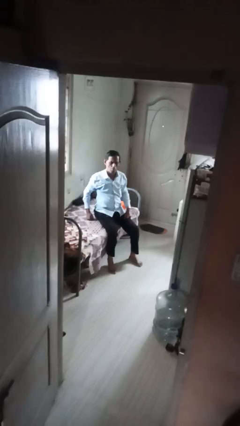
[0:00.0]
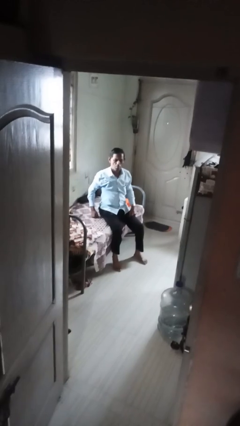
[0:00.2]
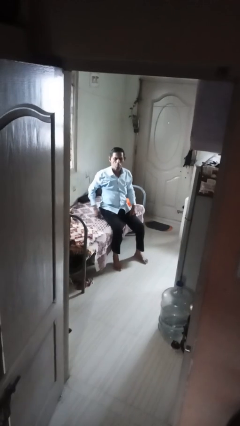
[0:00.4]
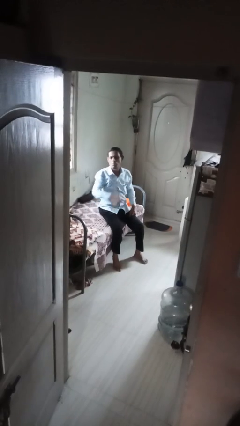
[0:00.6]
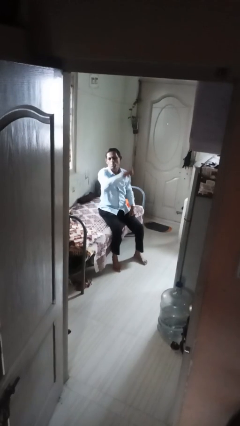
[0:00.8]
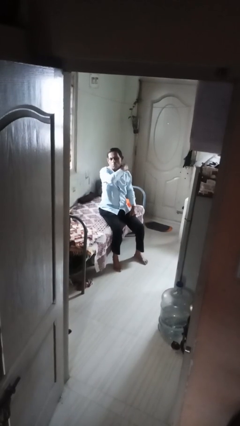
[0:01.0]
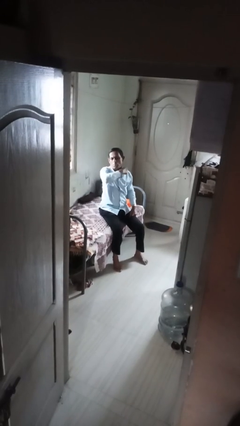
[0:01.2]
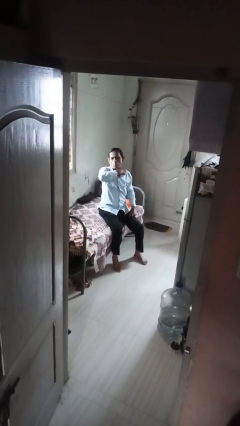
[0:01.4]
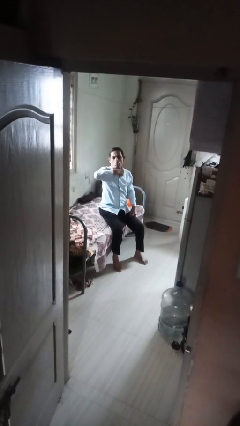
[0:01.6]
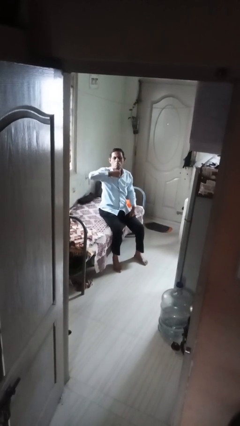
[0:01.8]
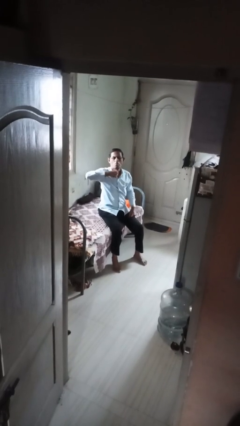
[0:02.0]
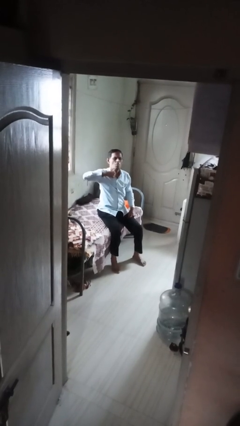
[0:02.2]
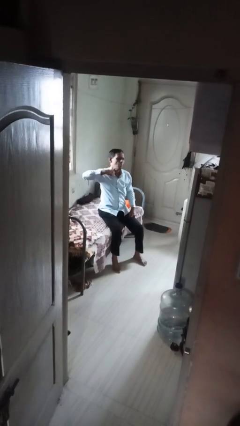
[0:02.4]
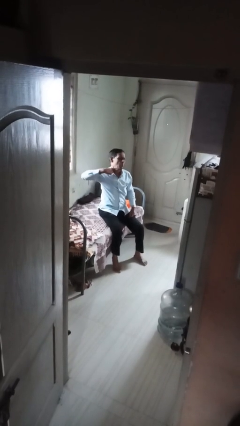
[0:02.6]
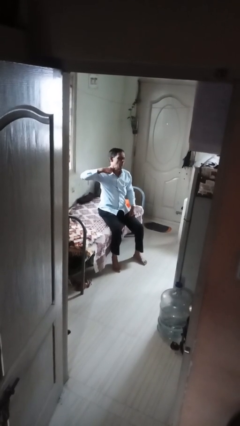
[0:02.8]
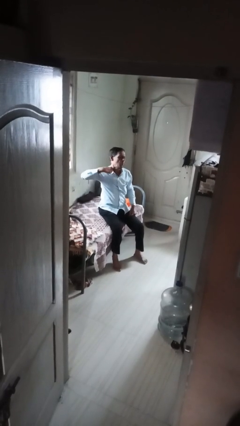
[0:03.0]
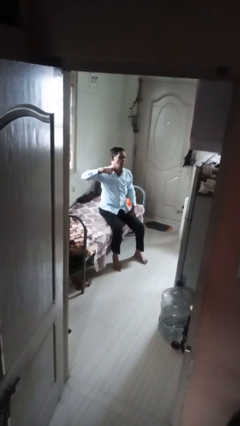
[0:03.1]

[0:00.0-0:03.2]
person gestures cut

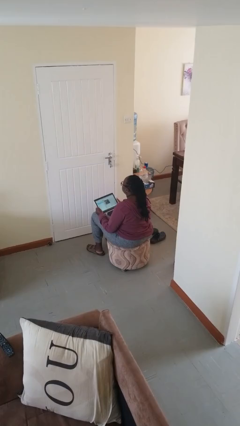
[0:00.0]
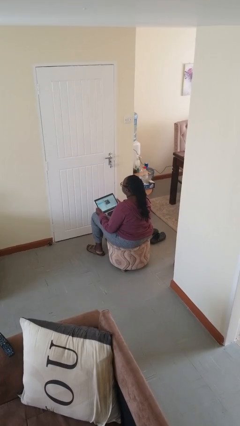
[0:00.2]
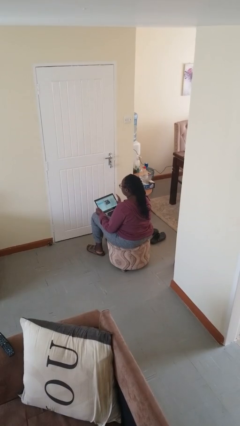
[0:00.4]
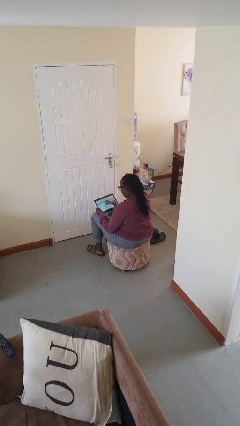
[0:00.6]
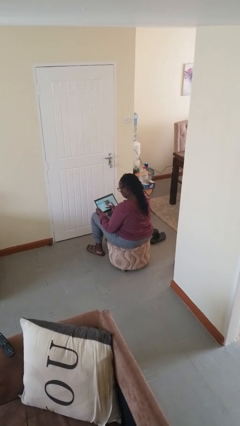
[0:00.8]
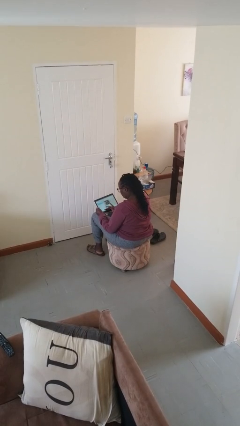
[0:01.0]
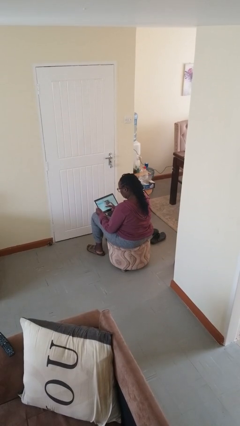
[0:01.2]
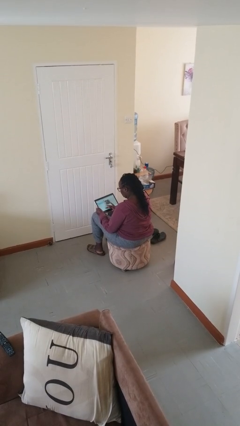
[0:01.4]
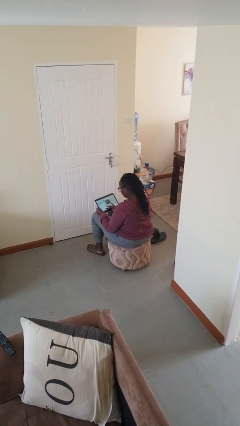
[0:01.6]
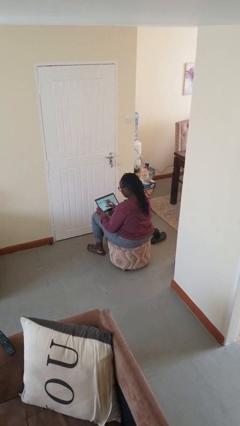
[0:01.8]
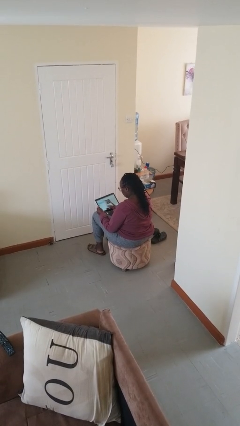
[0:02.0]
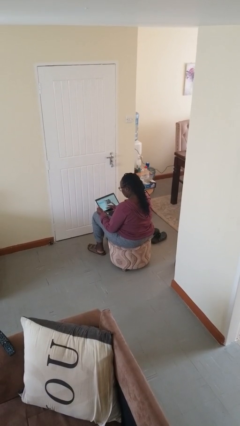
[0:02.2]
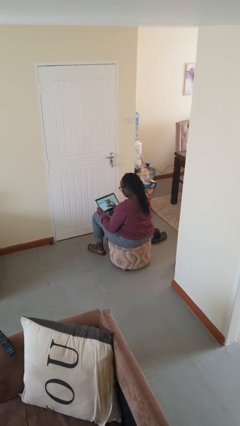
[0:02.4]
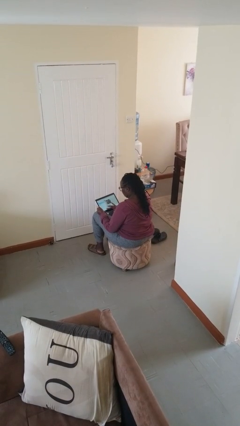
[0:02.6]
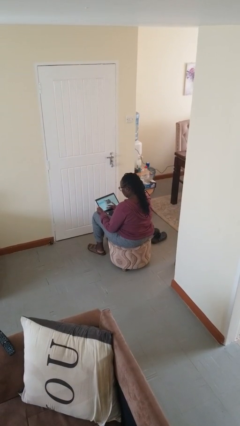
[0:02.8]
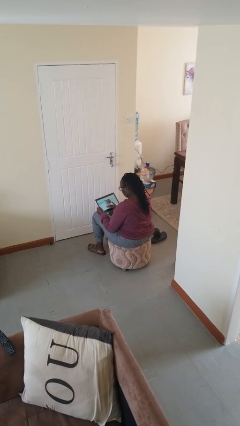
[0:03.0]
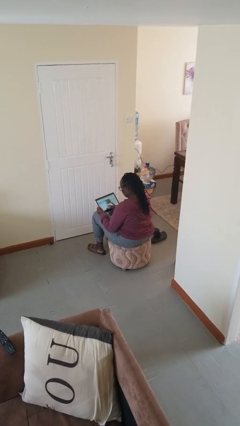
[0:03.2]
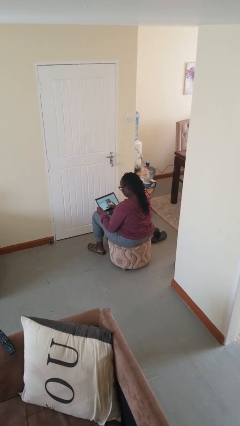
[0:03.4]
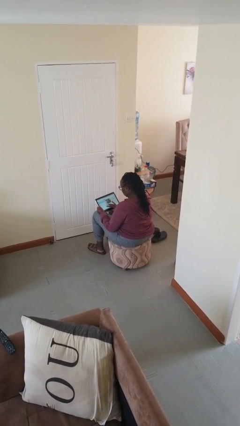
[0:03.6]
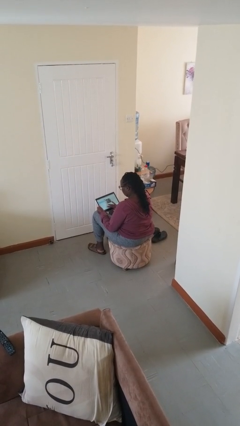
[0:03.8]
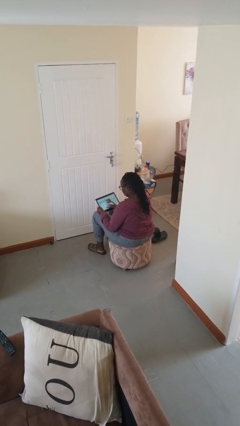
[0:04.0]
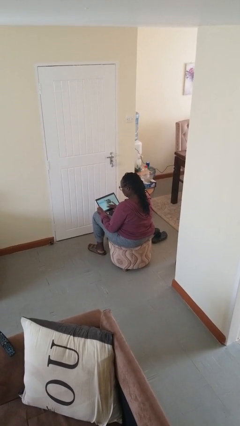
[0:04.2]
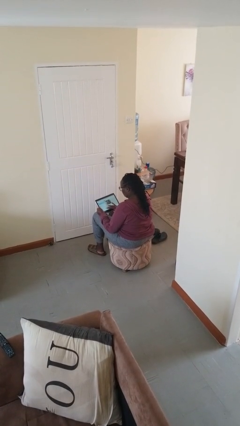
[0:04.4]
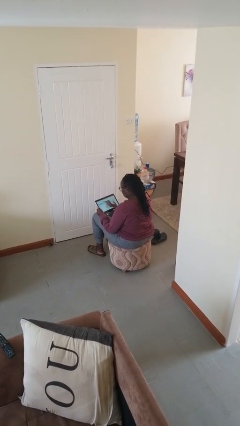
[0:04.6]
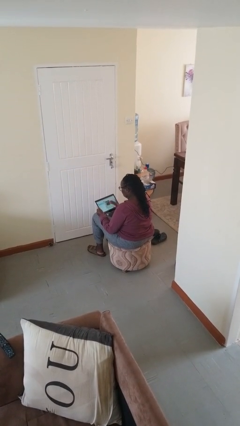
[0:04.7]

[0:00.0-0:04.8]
person interacts with tablet

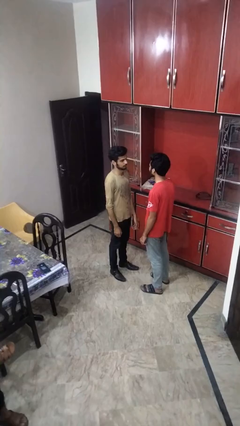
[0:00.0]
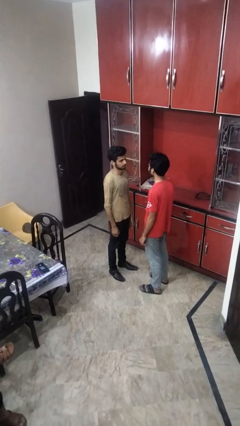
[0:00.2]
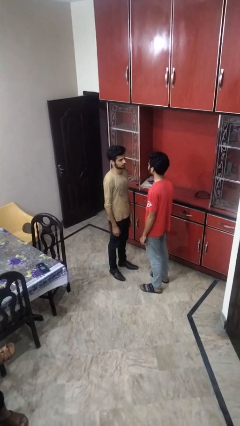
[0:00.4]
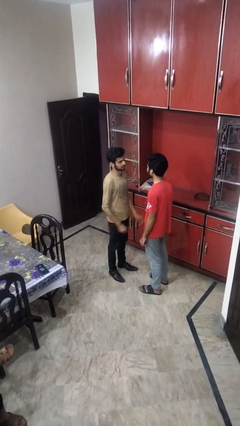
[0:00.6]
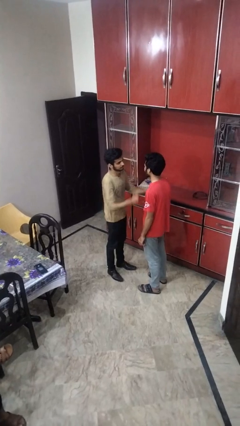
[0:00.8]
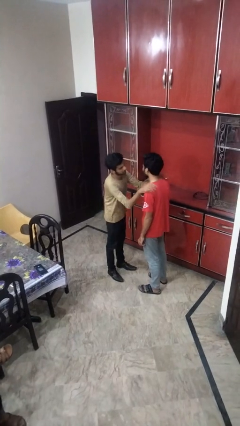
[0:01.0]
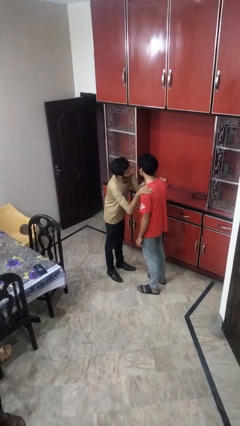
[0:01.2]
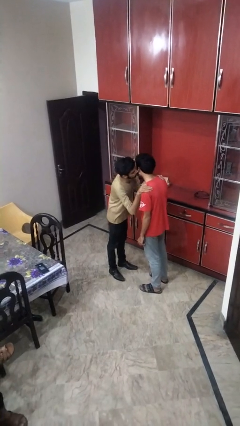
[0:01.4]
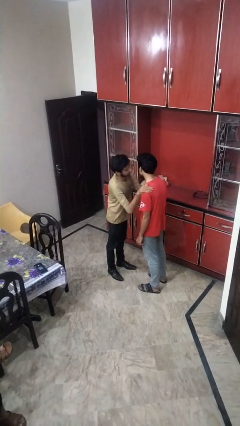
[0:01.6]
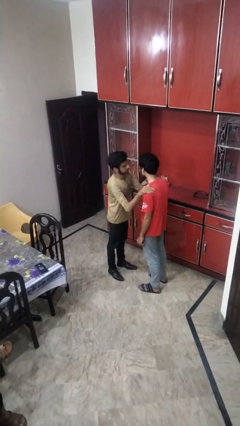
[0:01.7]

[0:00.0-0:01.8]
person shoves person

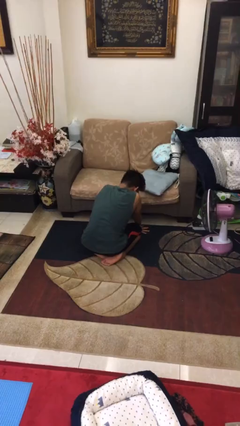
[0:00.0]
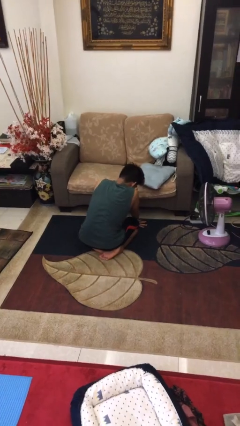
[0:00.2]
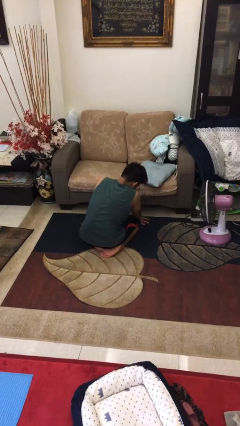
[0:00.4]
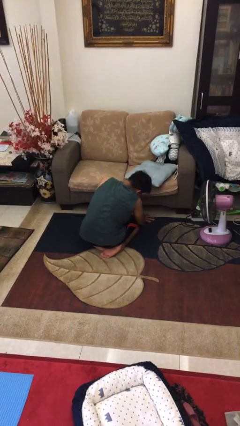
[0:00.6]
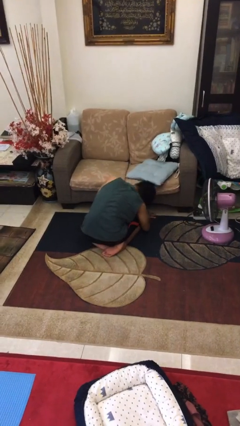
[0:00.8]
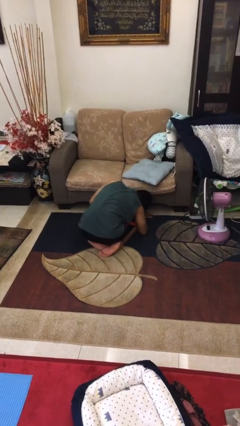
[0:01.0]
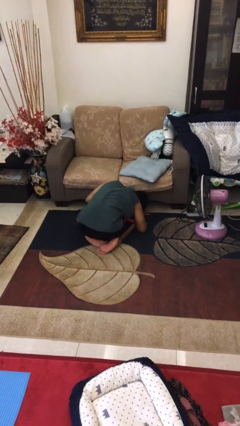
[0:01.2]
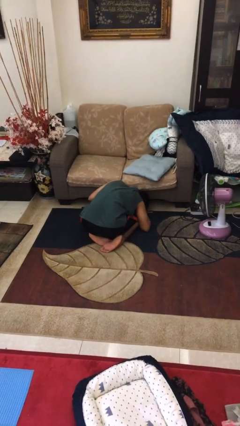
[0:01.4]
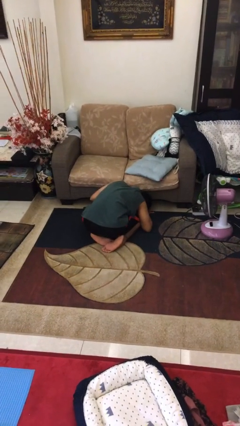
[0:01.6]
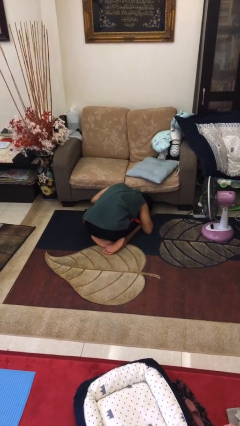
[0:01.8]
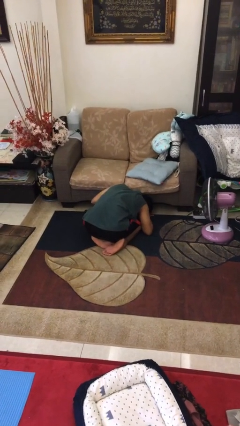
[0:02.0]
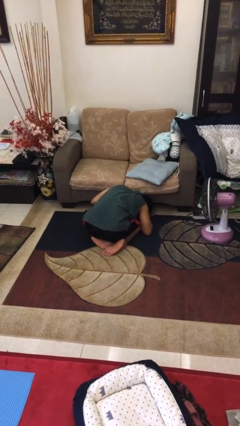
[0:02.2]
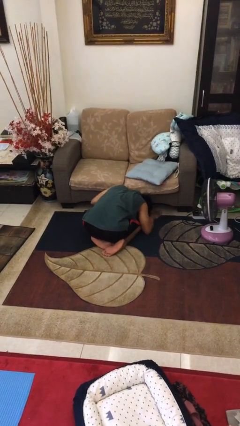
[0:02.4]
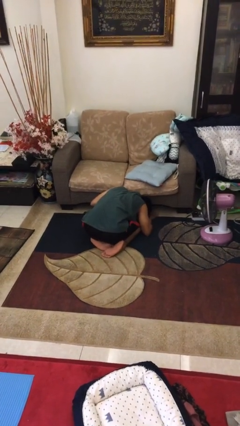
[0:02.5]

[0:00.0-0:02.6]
person searches under couch

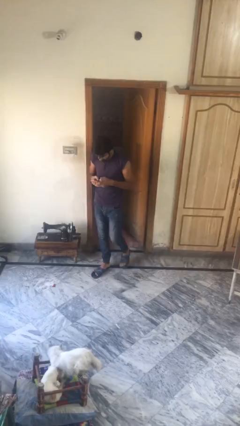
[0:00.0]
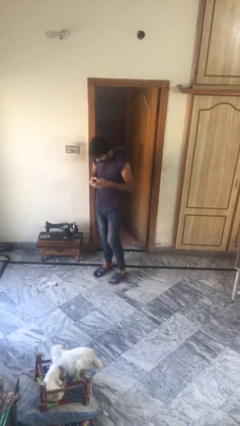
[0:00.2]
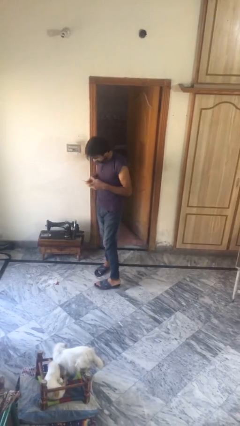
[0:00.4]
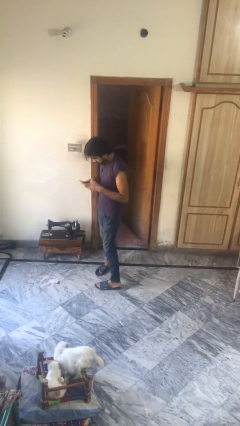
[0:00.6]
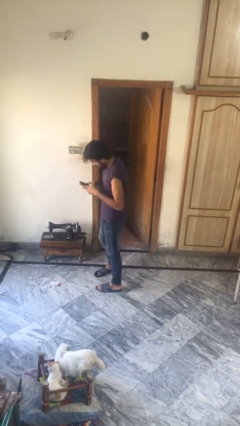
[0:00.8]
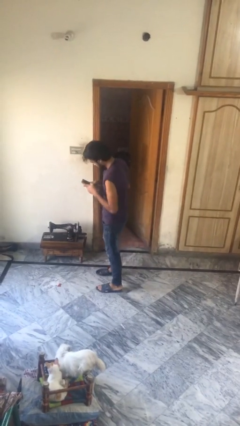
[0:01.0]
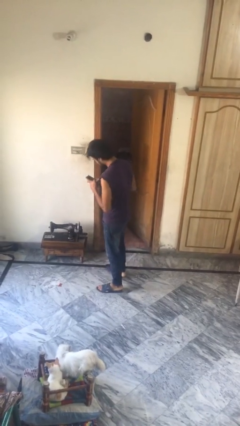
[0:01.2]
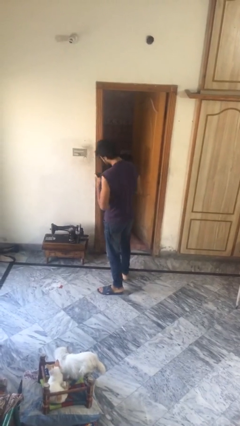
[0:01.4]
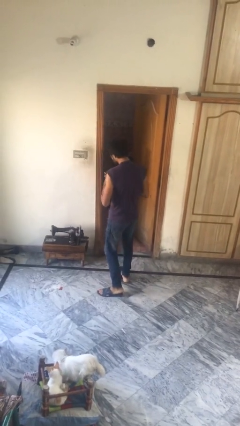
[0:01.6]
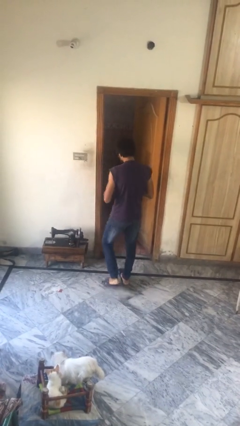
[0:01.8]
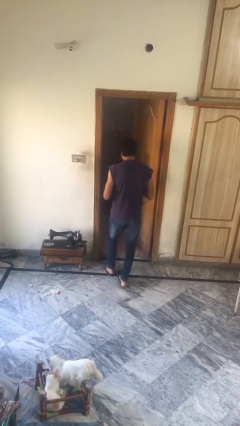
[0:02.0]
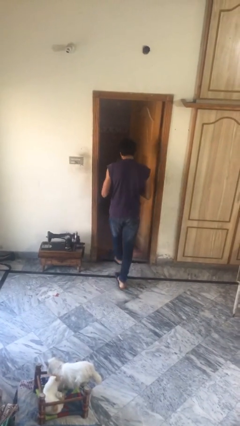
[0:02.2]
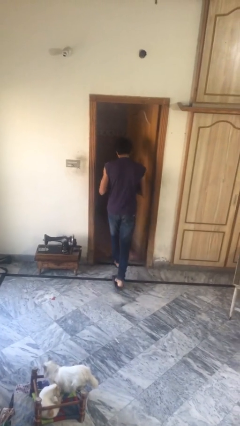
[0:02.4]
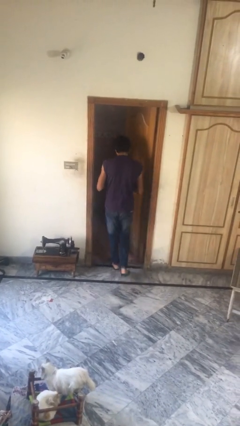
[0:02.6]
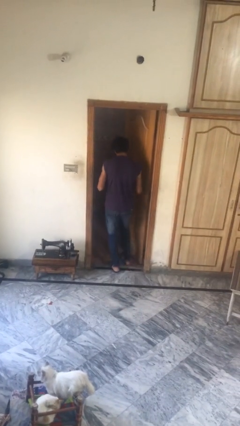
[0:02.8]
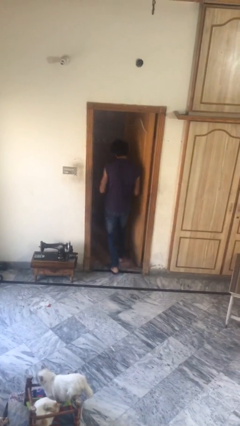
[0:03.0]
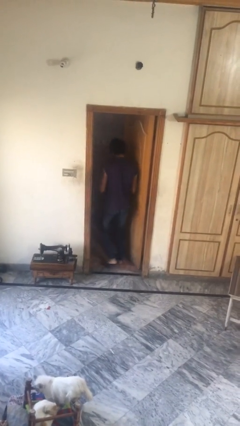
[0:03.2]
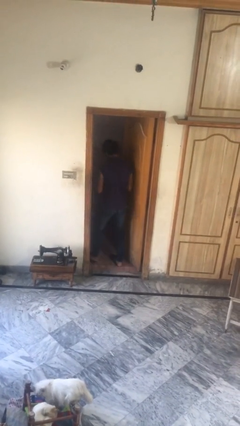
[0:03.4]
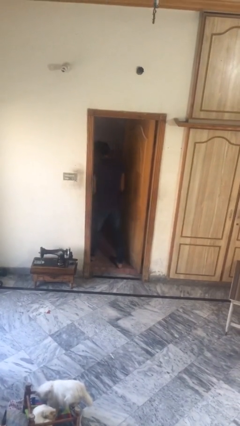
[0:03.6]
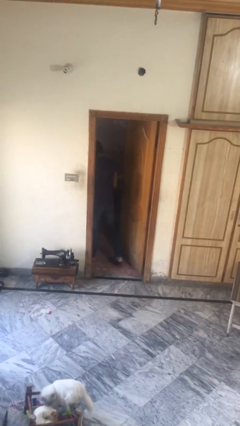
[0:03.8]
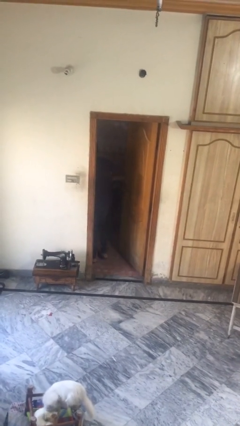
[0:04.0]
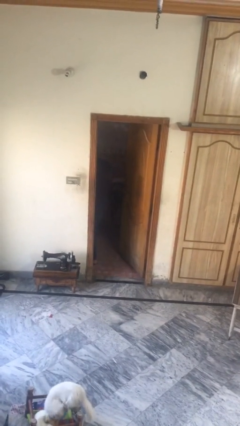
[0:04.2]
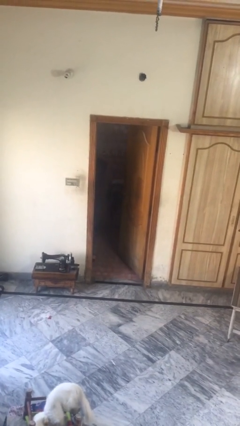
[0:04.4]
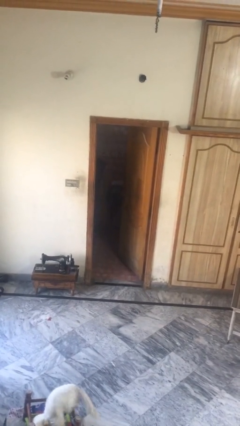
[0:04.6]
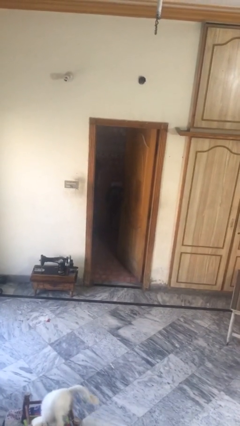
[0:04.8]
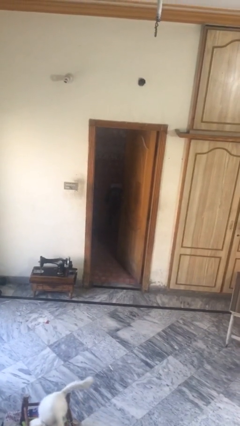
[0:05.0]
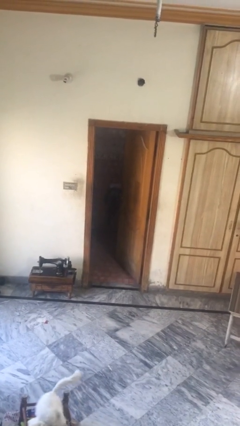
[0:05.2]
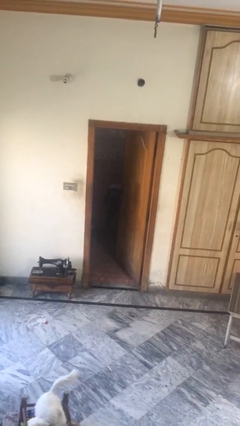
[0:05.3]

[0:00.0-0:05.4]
person exits scene through structure

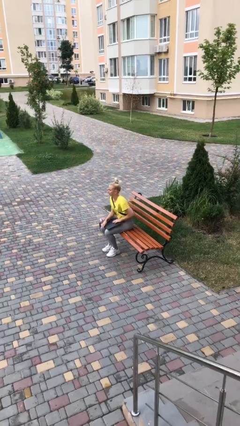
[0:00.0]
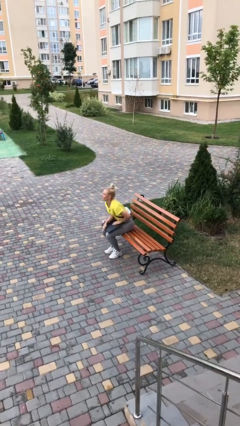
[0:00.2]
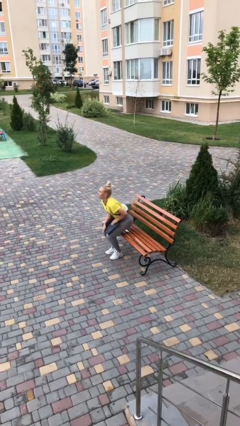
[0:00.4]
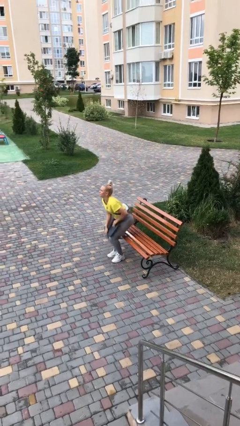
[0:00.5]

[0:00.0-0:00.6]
person stands up
